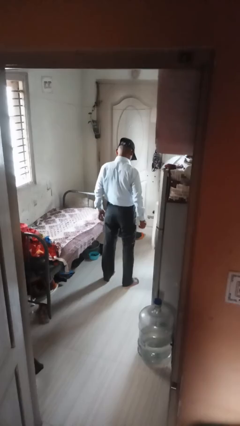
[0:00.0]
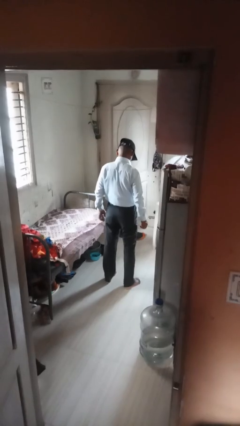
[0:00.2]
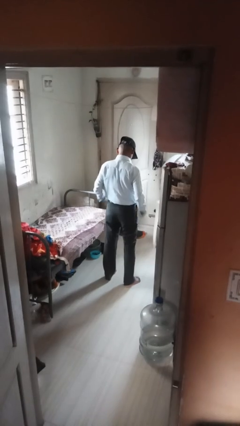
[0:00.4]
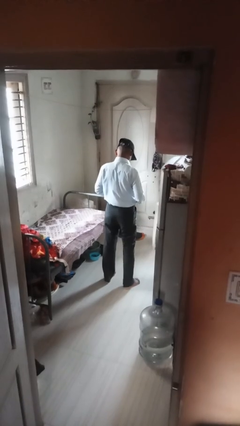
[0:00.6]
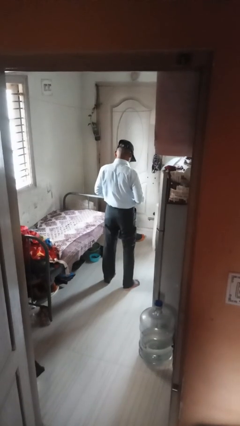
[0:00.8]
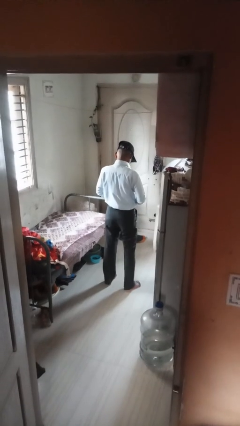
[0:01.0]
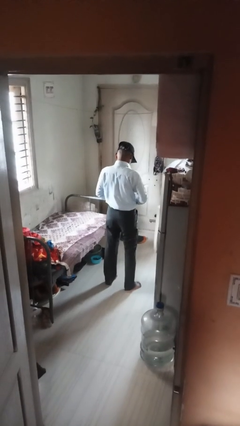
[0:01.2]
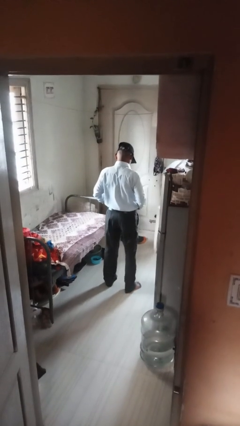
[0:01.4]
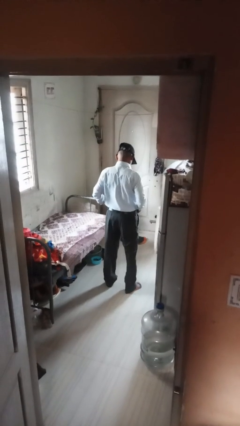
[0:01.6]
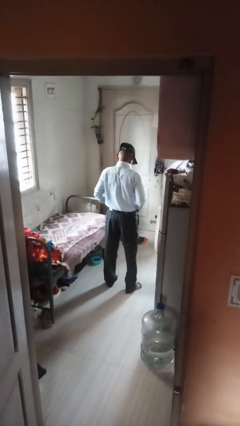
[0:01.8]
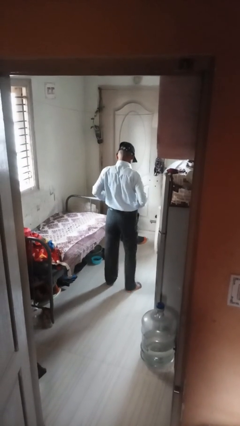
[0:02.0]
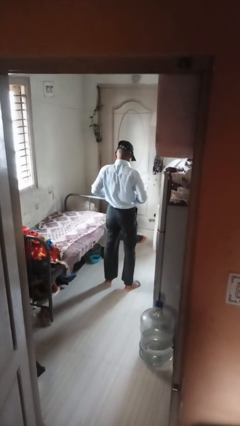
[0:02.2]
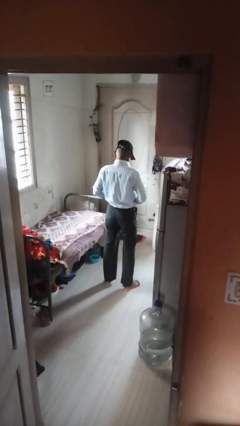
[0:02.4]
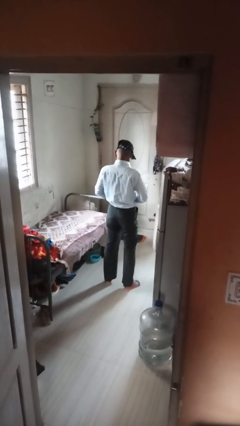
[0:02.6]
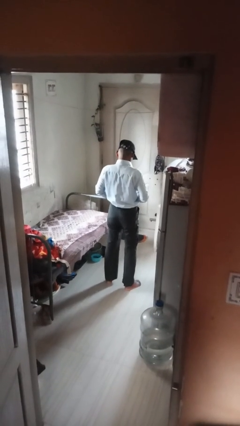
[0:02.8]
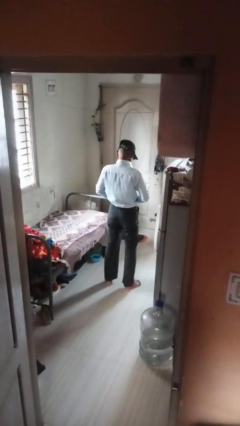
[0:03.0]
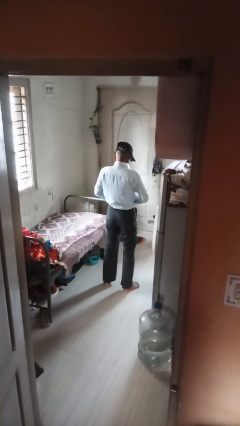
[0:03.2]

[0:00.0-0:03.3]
person hikes up pants

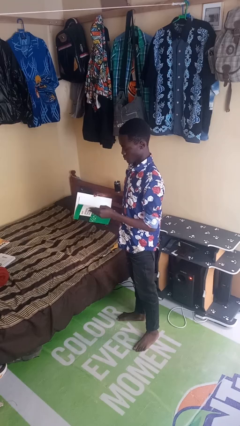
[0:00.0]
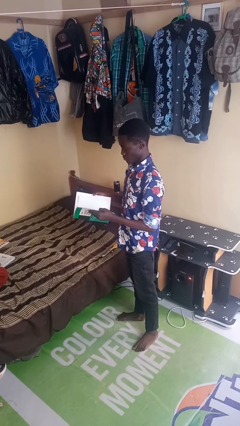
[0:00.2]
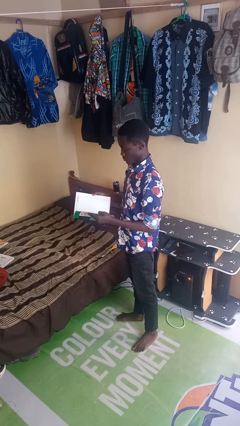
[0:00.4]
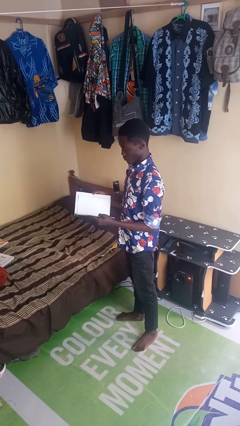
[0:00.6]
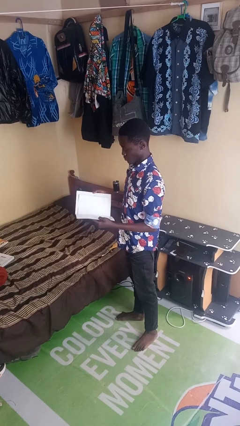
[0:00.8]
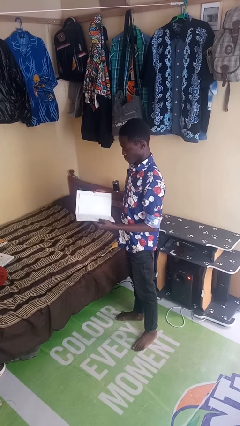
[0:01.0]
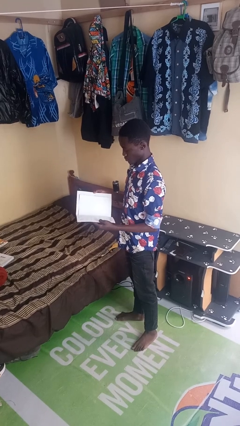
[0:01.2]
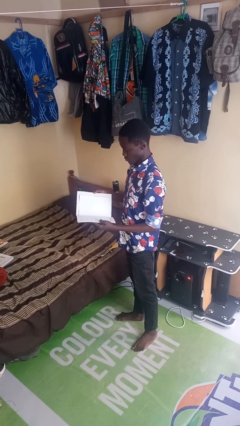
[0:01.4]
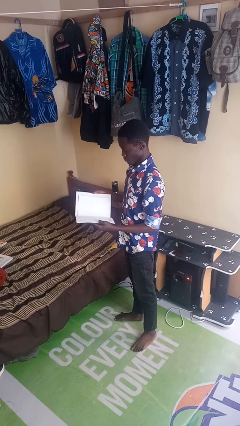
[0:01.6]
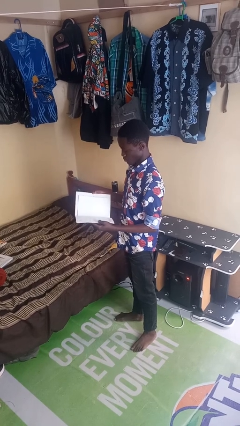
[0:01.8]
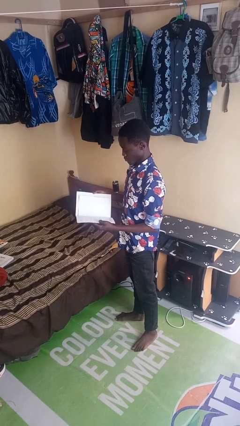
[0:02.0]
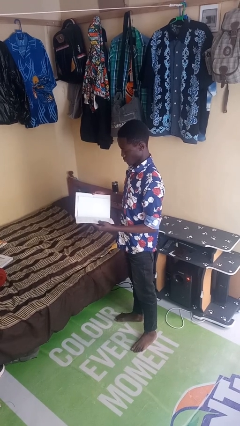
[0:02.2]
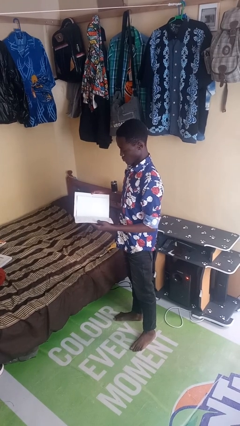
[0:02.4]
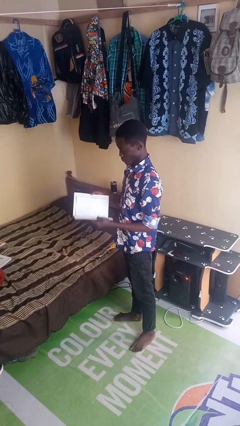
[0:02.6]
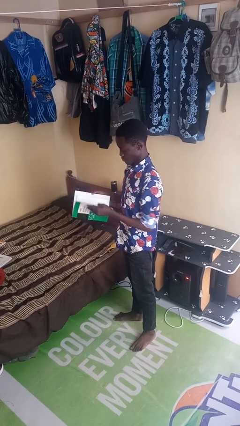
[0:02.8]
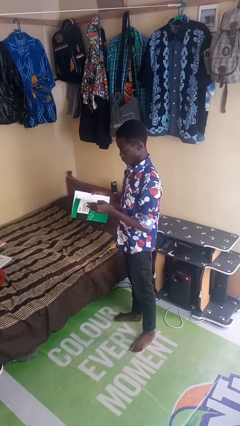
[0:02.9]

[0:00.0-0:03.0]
person reads magazine

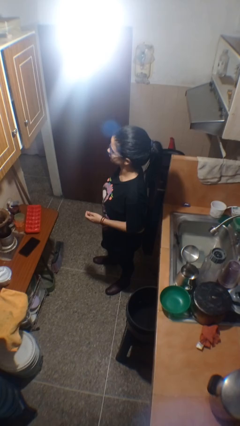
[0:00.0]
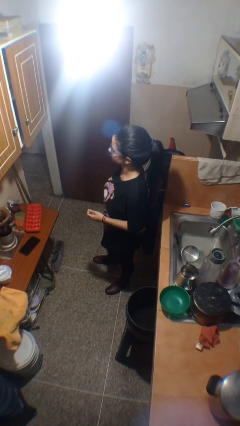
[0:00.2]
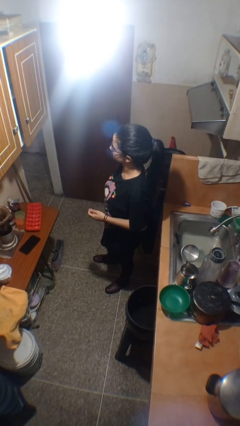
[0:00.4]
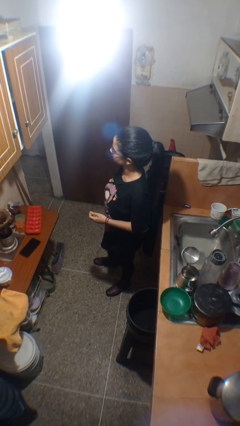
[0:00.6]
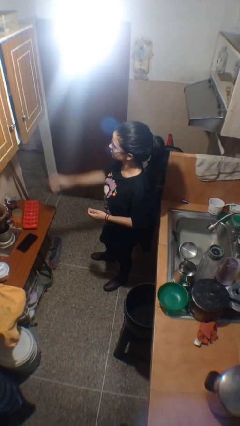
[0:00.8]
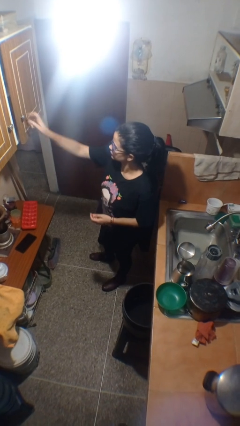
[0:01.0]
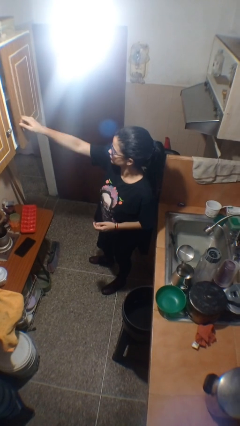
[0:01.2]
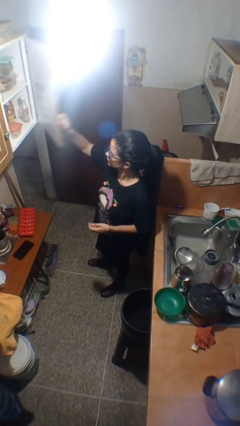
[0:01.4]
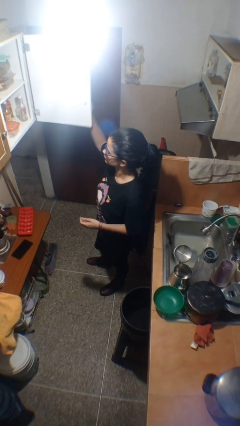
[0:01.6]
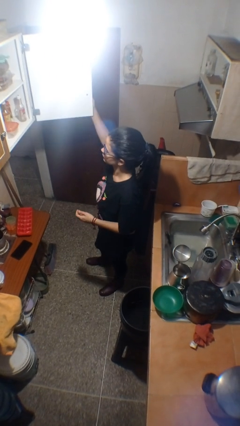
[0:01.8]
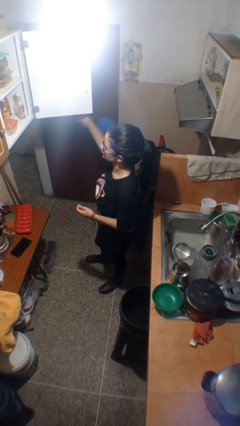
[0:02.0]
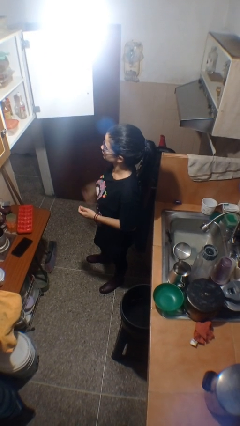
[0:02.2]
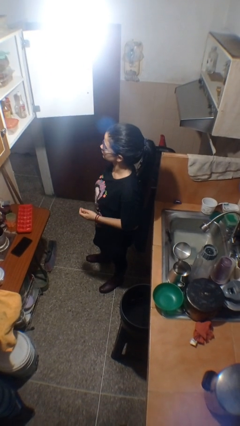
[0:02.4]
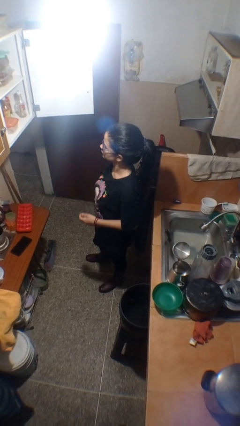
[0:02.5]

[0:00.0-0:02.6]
person opens cabinet

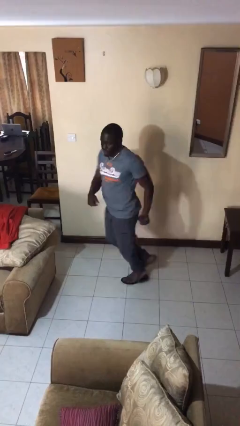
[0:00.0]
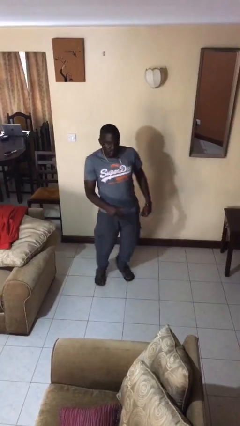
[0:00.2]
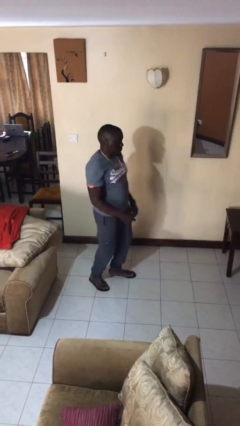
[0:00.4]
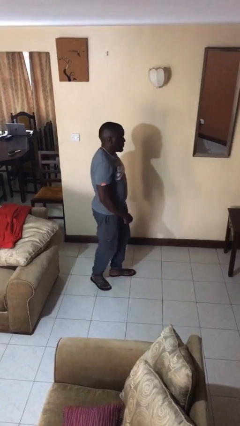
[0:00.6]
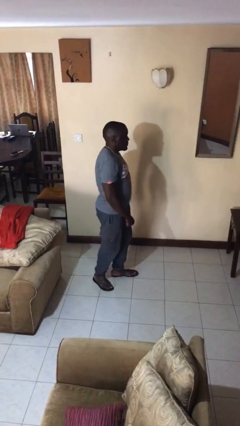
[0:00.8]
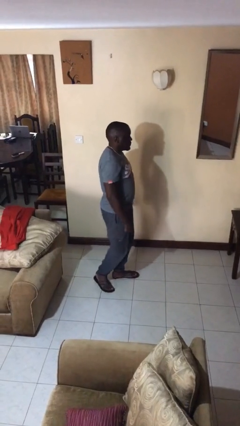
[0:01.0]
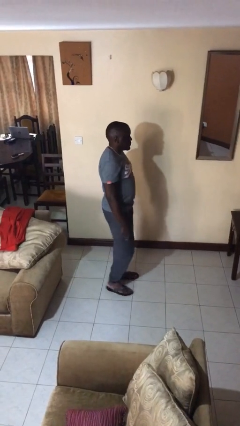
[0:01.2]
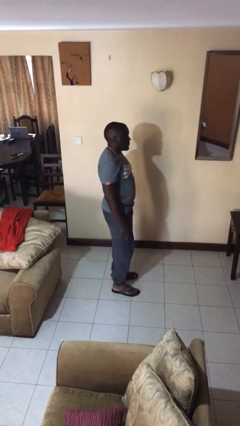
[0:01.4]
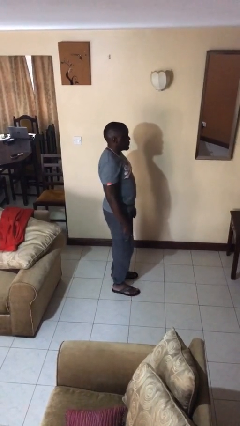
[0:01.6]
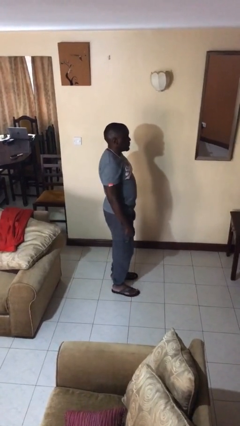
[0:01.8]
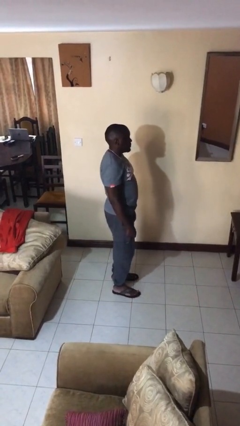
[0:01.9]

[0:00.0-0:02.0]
person twirls

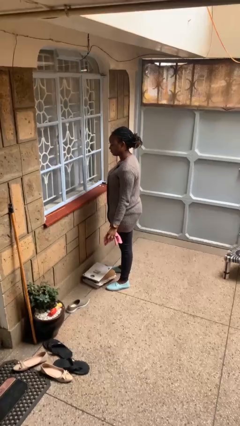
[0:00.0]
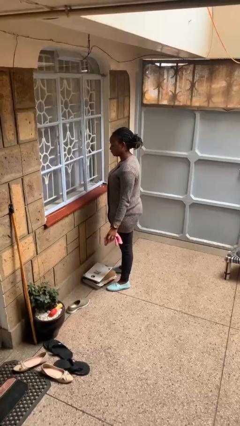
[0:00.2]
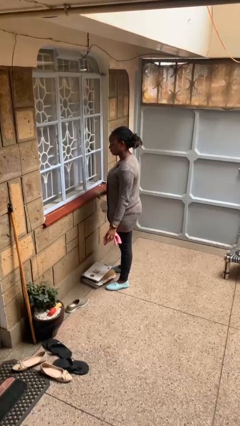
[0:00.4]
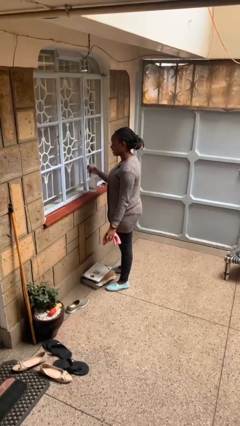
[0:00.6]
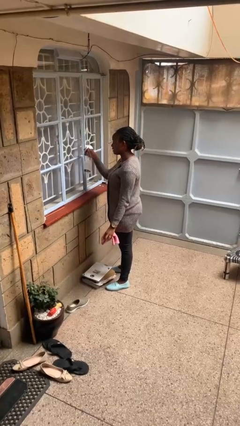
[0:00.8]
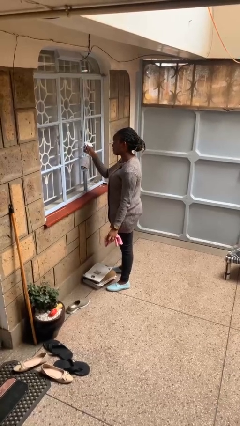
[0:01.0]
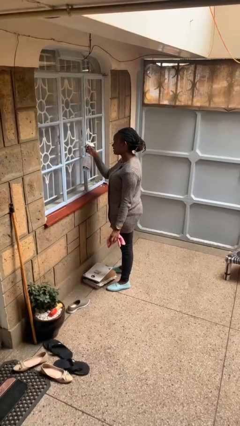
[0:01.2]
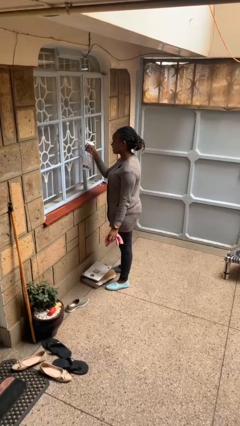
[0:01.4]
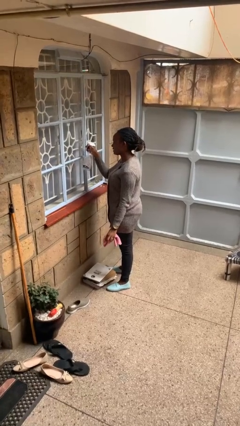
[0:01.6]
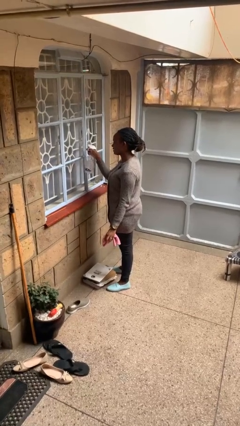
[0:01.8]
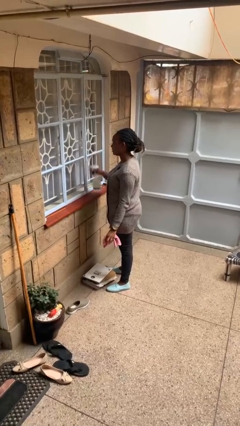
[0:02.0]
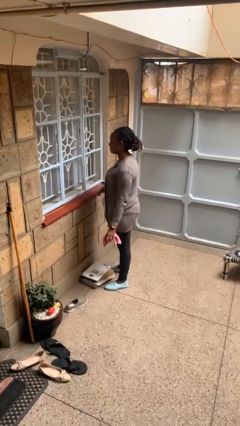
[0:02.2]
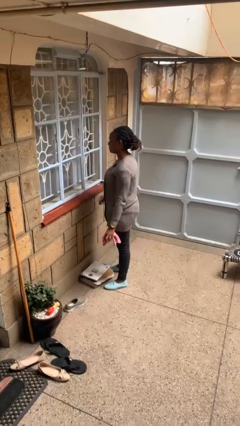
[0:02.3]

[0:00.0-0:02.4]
person sprays from bottle

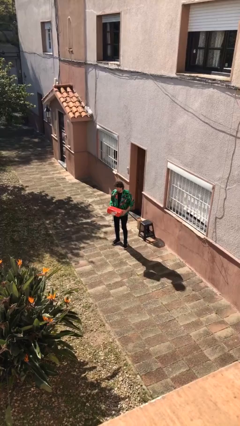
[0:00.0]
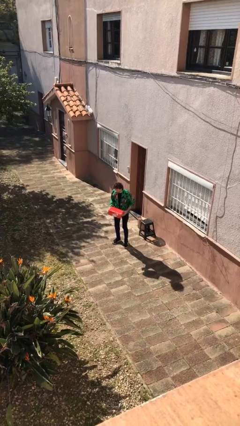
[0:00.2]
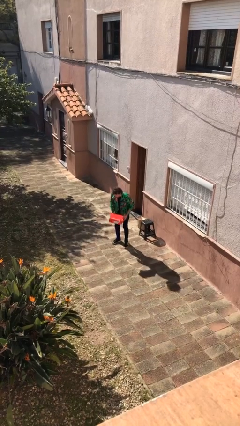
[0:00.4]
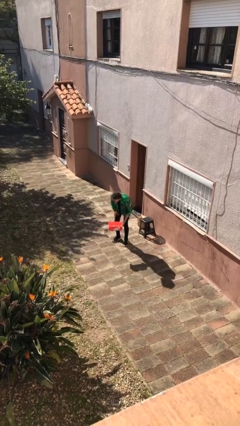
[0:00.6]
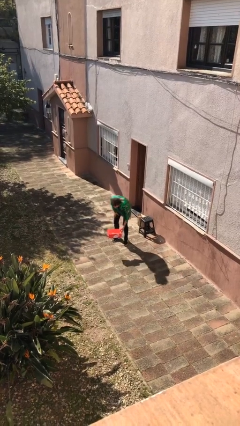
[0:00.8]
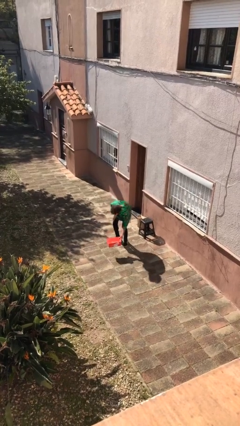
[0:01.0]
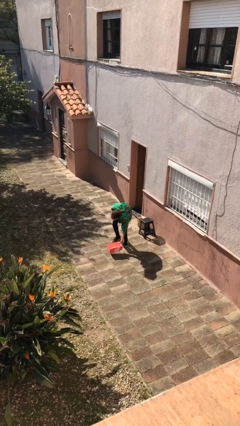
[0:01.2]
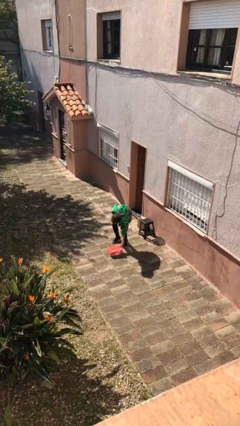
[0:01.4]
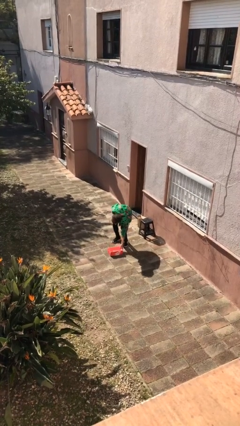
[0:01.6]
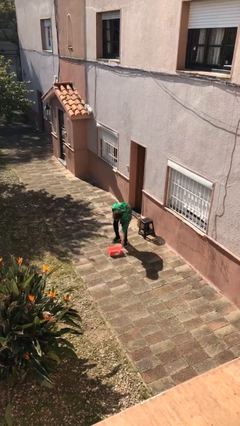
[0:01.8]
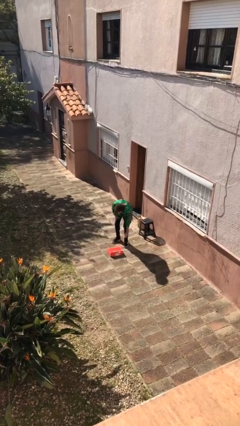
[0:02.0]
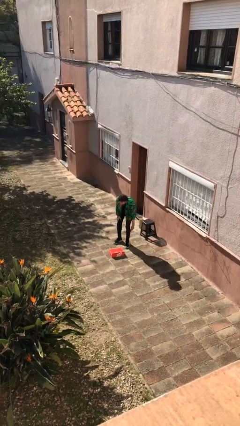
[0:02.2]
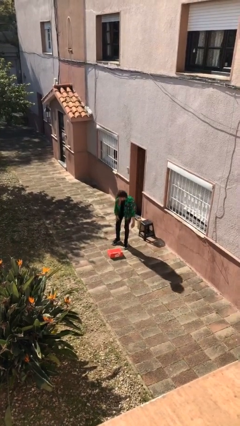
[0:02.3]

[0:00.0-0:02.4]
person puts down object on floor

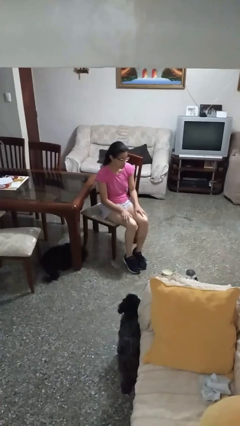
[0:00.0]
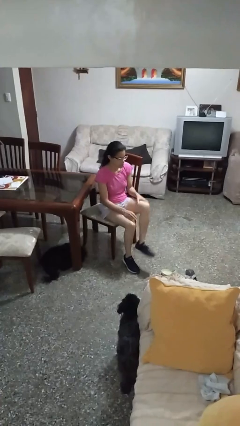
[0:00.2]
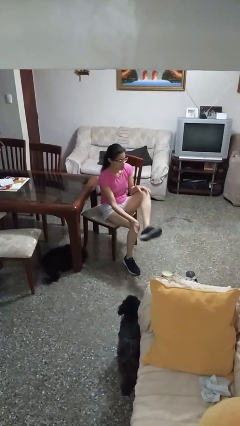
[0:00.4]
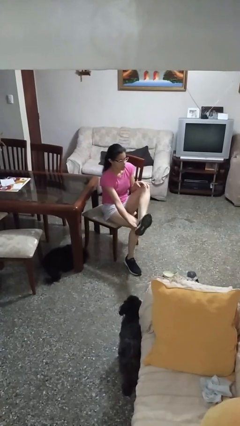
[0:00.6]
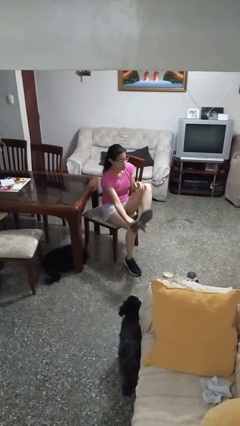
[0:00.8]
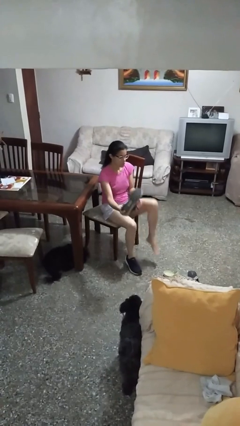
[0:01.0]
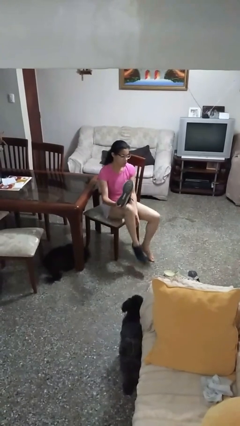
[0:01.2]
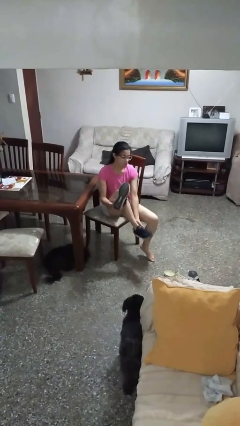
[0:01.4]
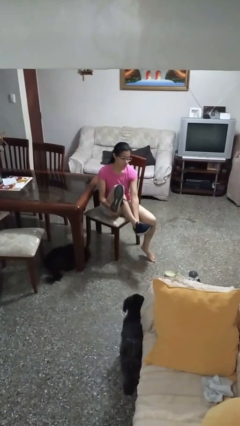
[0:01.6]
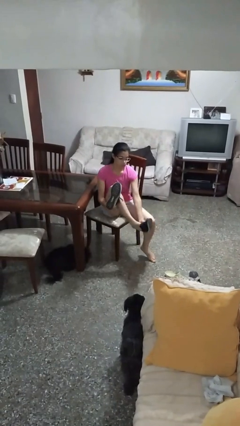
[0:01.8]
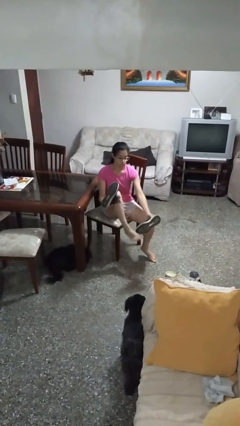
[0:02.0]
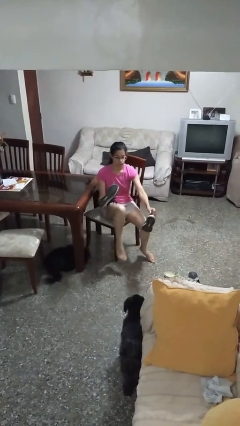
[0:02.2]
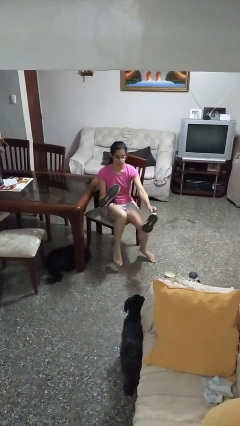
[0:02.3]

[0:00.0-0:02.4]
person takes off shoes
